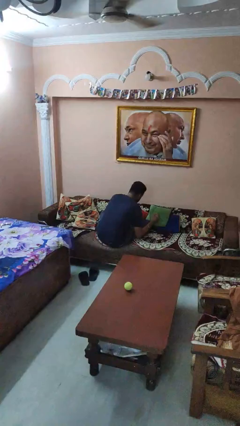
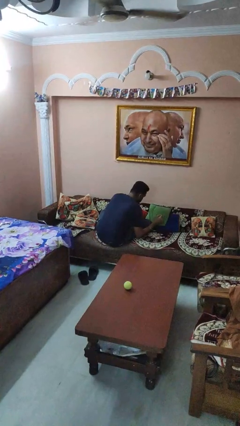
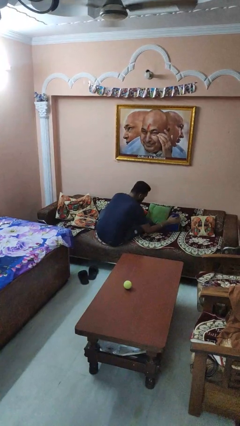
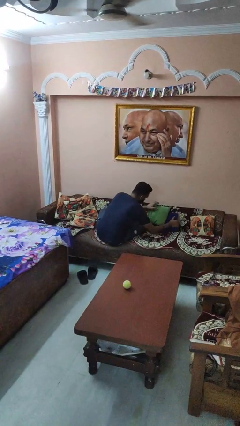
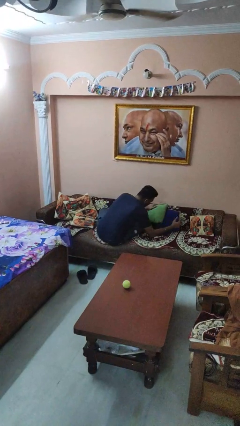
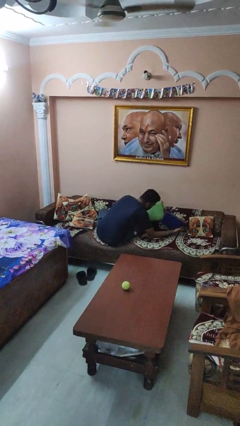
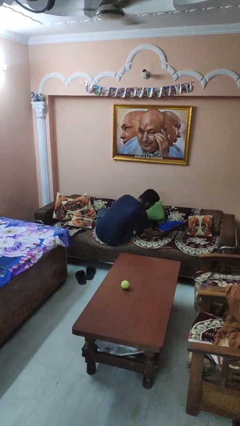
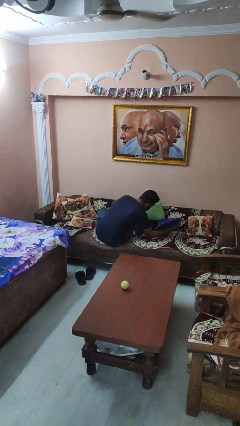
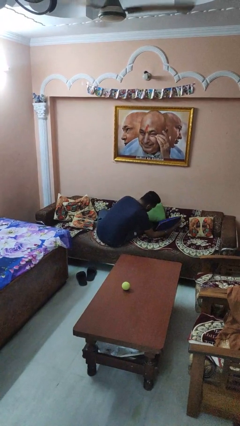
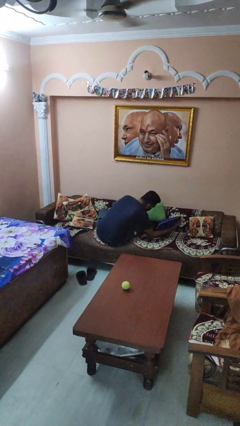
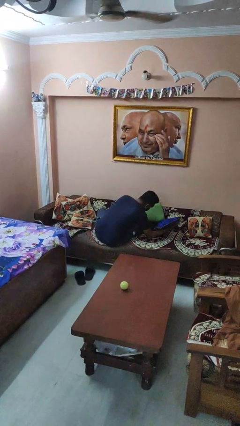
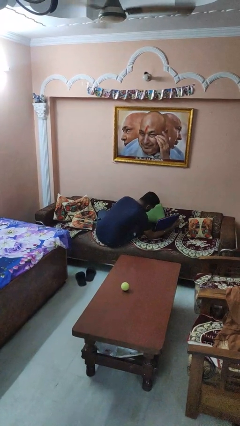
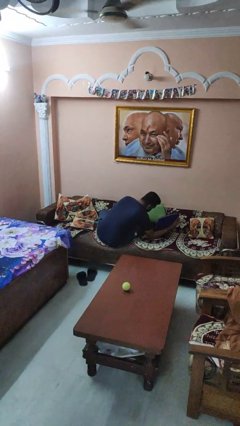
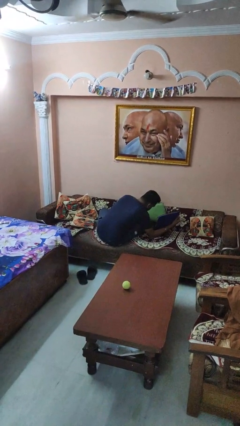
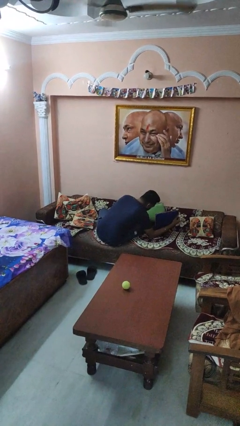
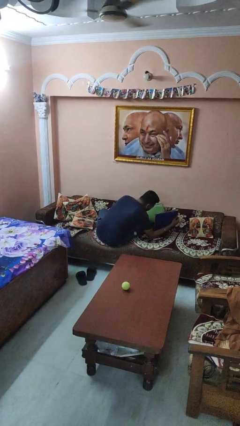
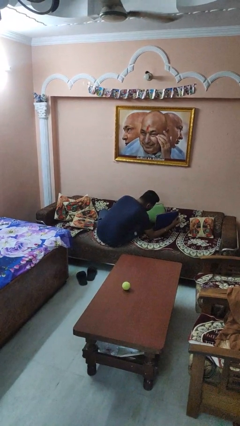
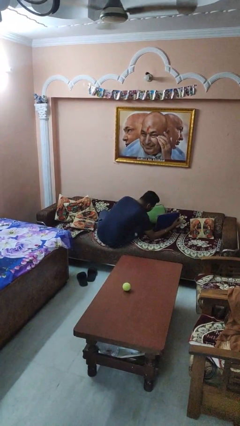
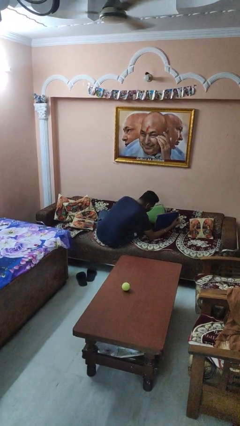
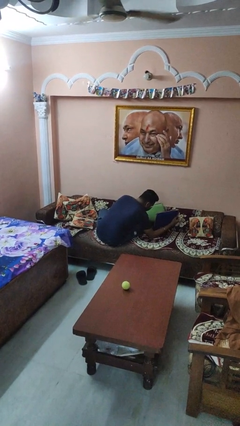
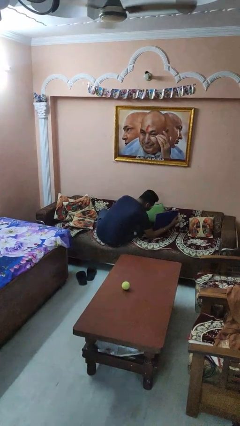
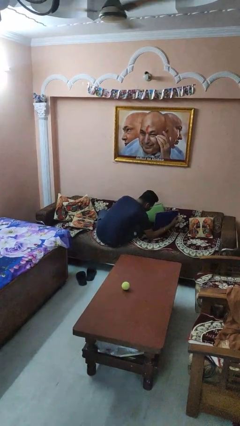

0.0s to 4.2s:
person searches in couch

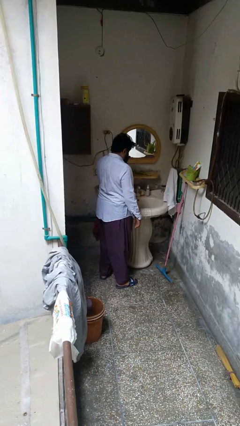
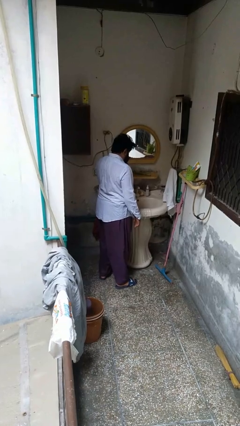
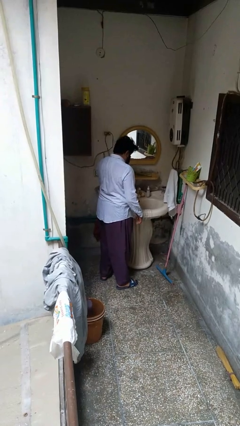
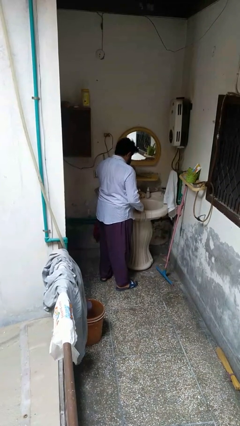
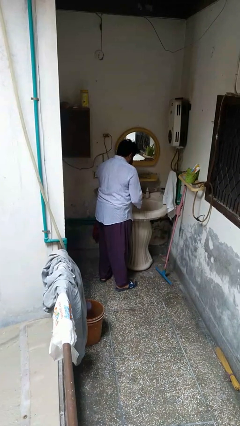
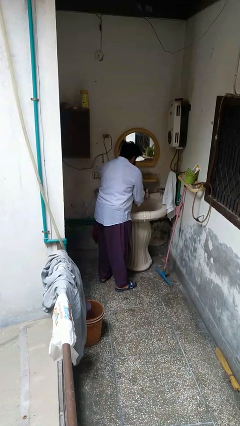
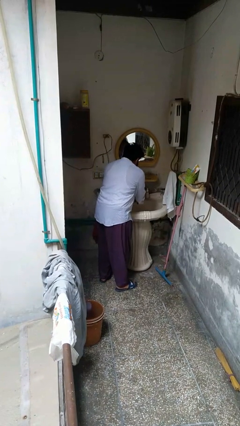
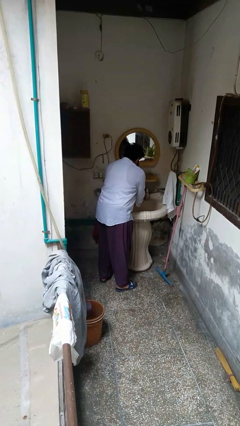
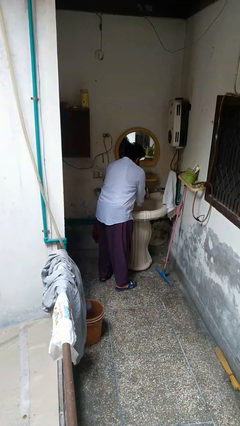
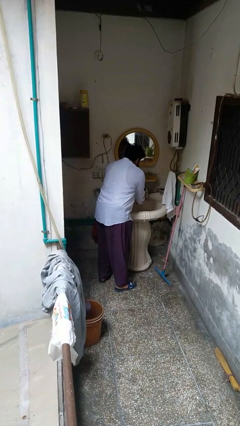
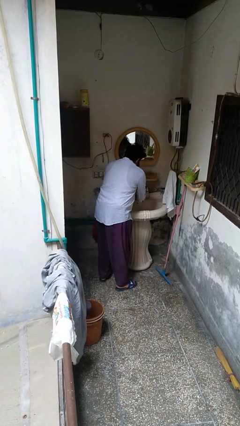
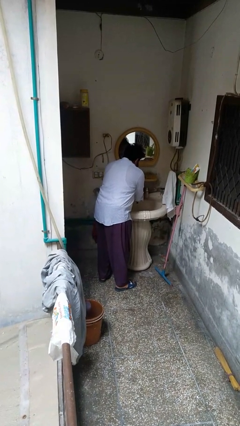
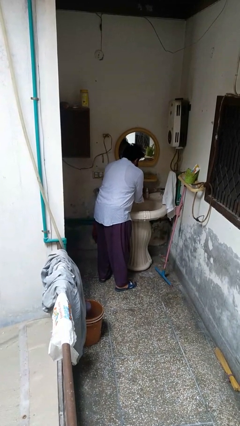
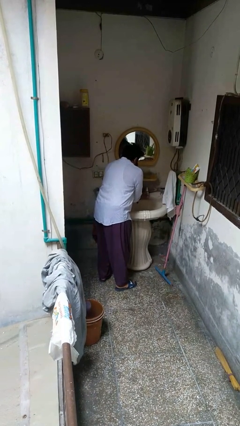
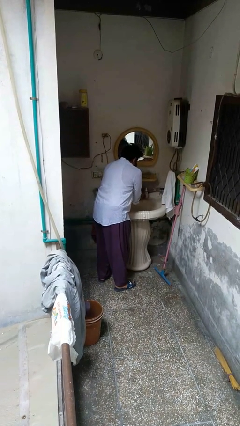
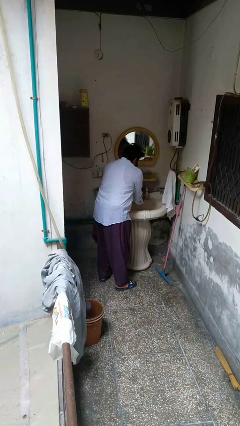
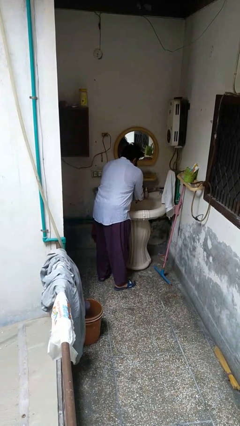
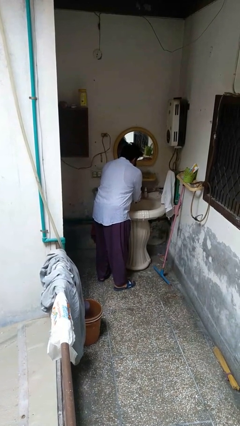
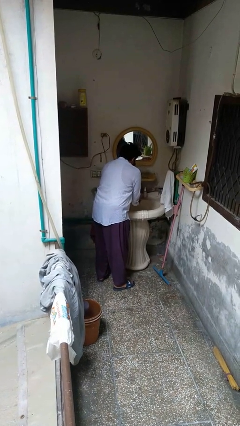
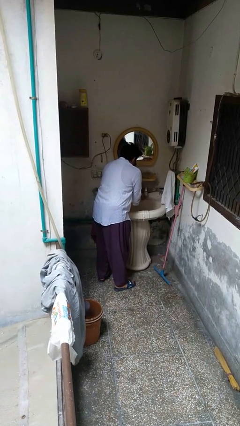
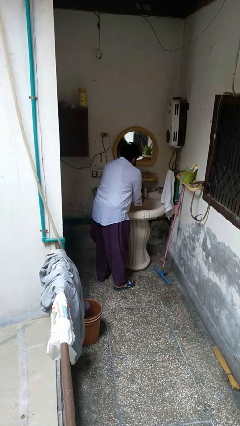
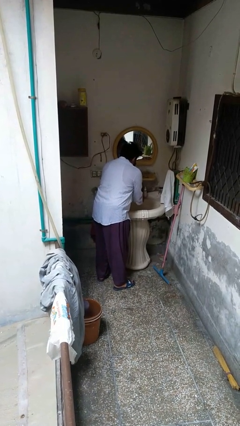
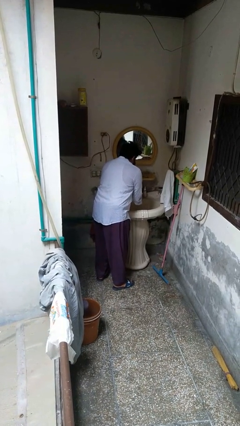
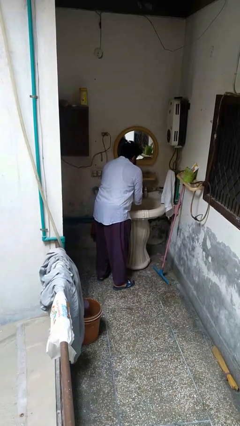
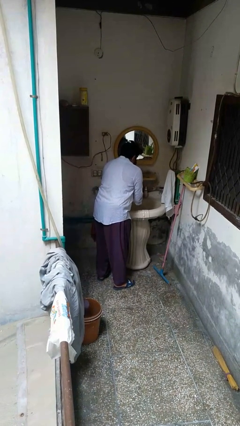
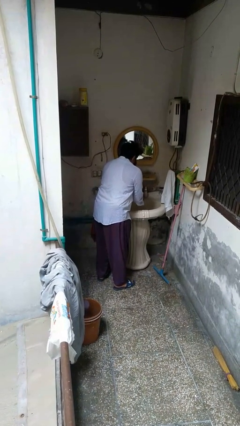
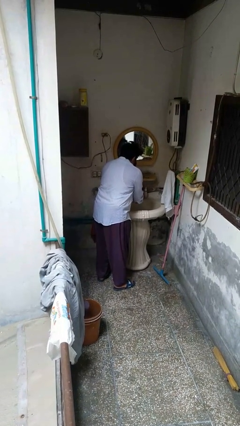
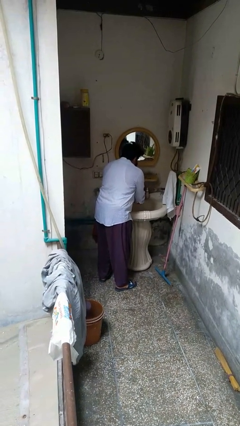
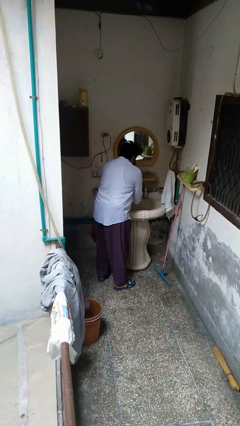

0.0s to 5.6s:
person washes hands

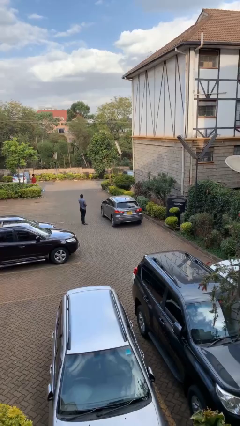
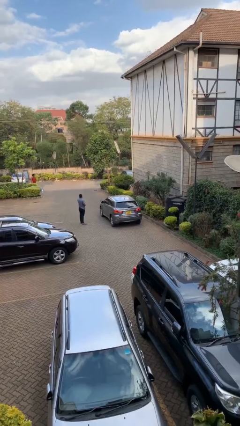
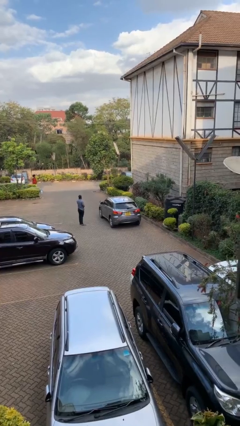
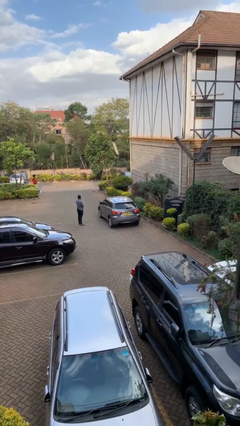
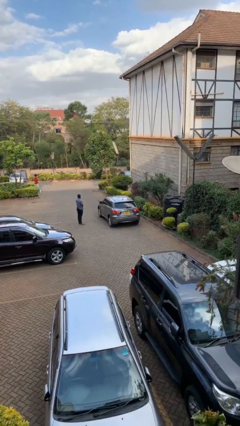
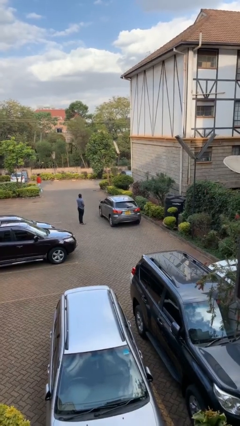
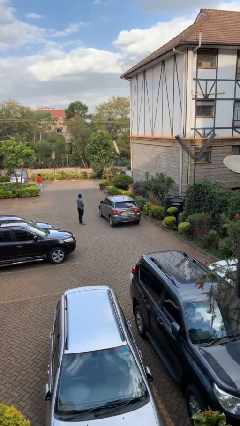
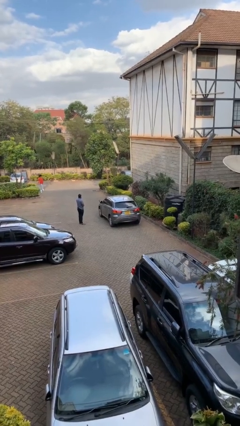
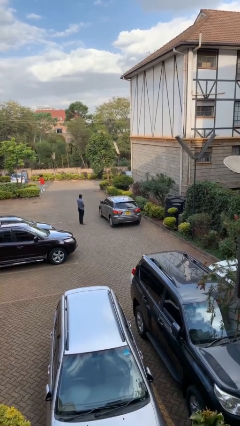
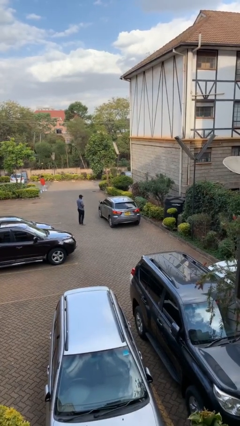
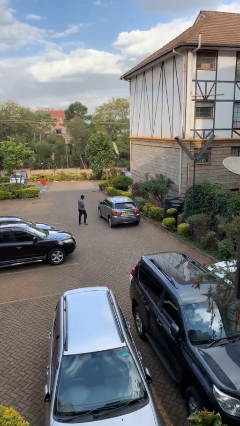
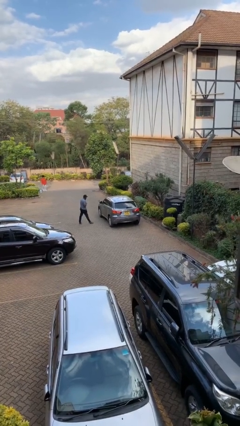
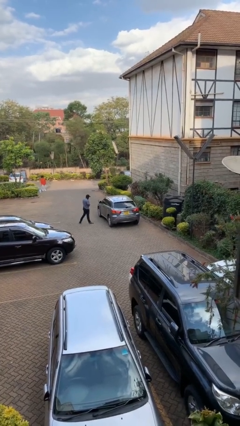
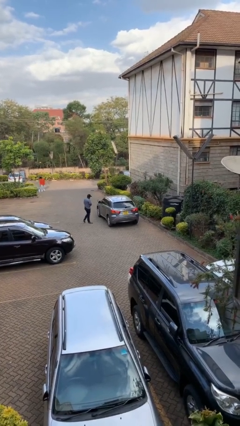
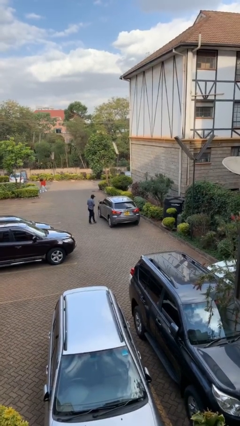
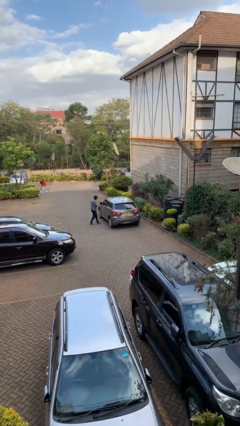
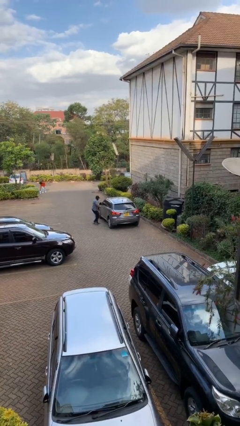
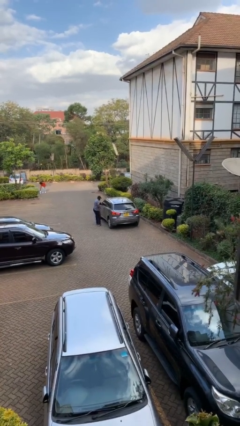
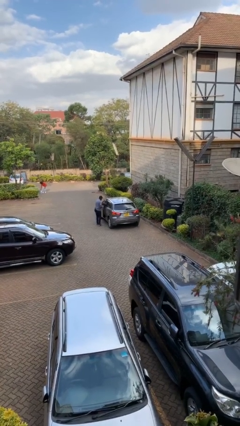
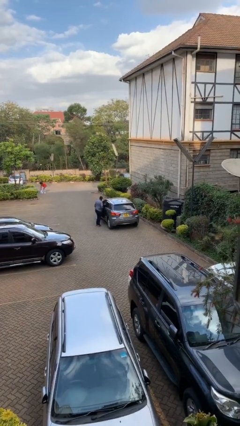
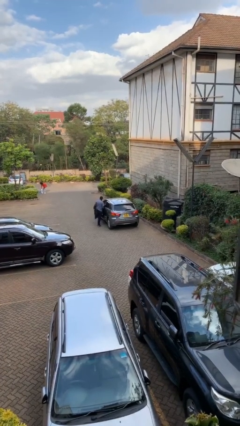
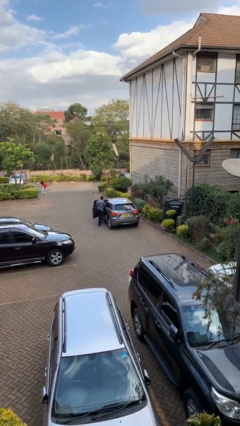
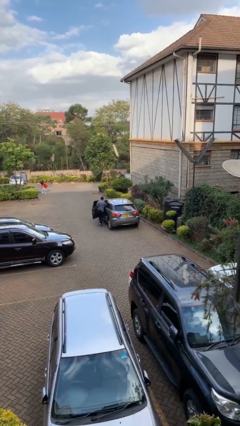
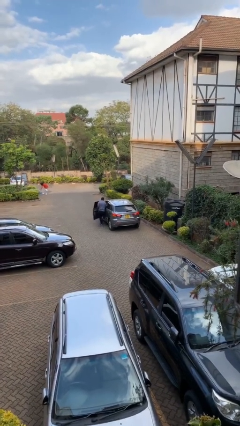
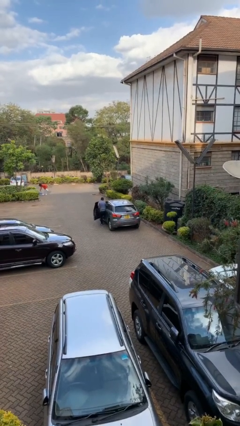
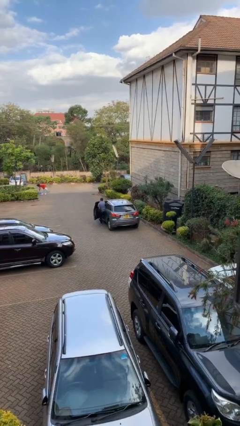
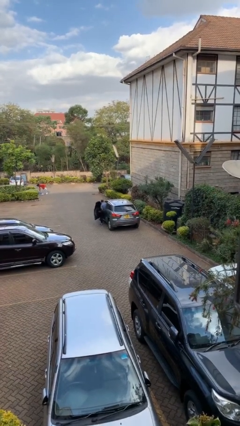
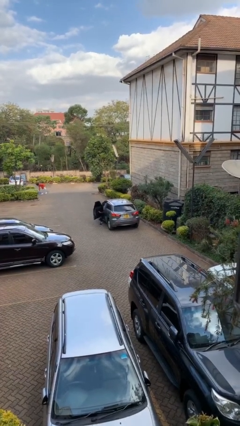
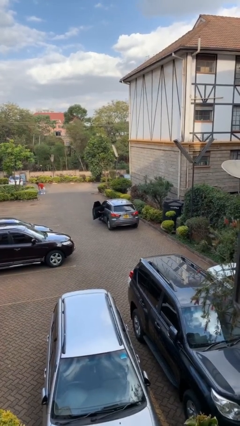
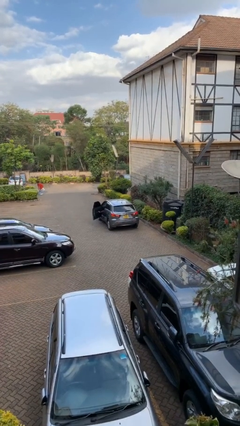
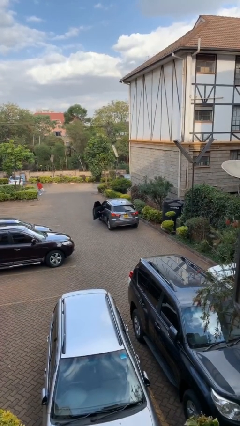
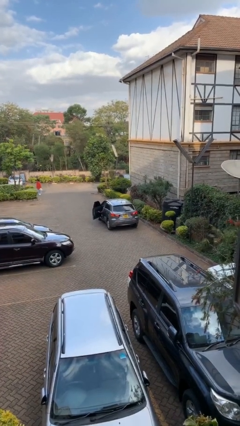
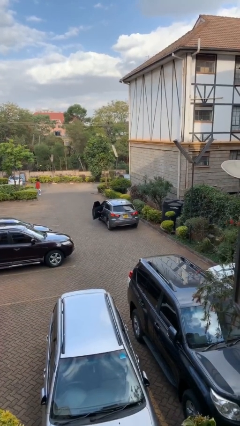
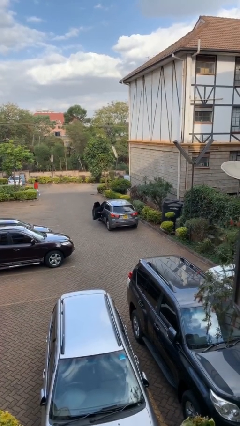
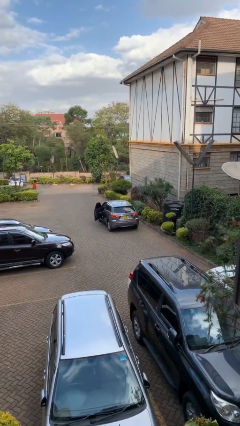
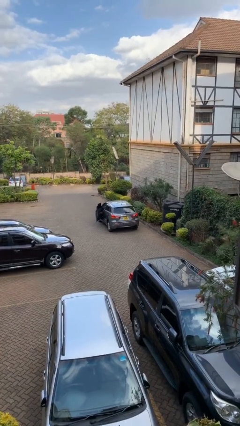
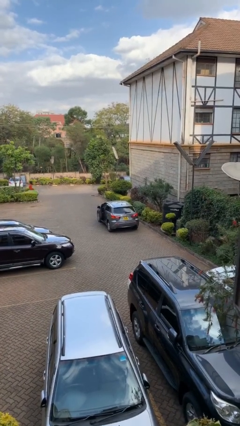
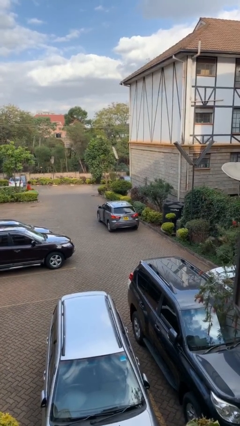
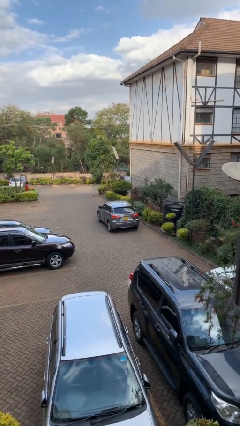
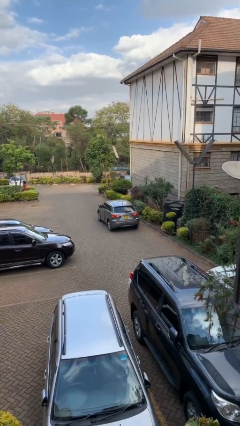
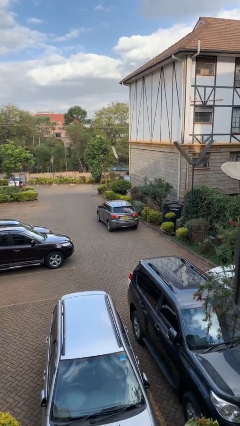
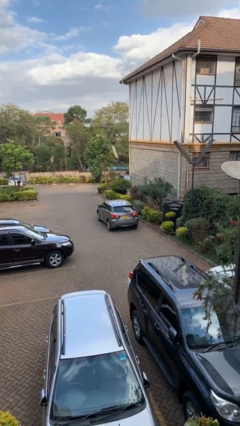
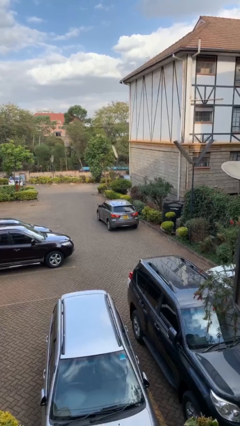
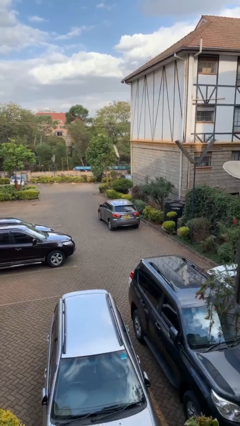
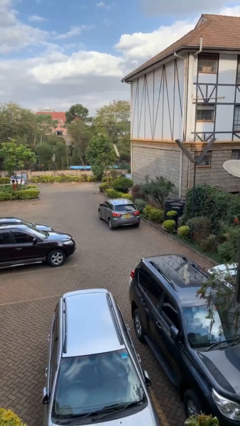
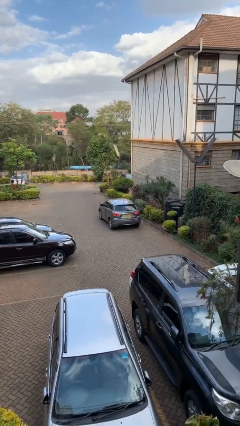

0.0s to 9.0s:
car picks up person
